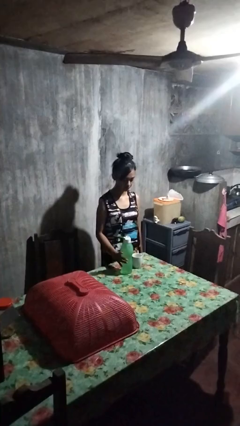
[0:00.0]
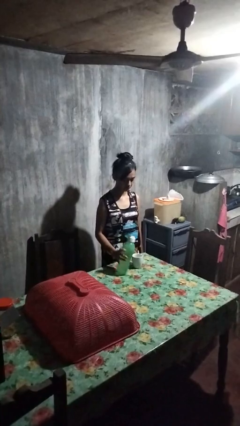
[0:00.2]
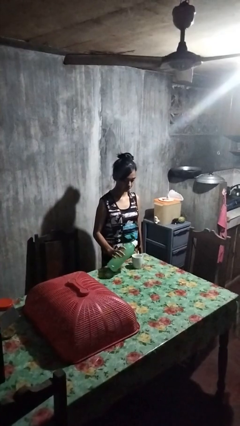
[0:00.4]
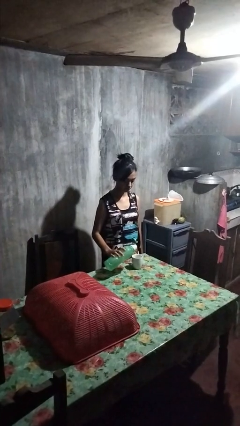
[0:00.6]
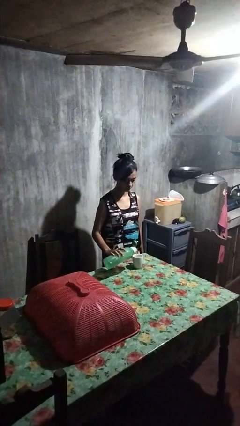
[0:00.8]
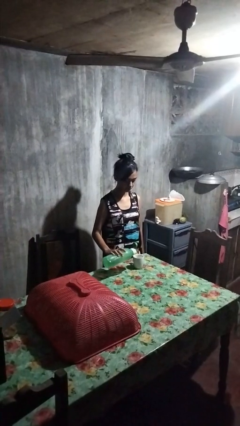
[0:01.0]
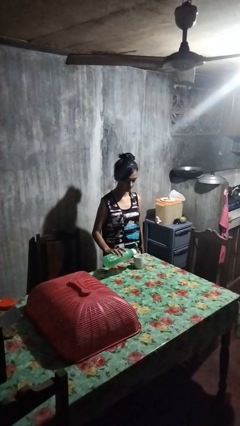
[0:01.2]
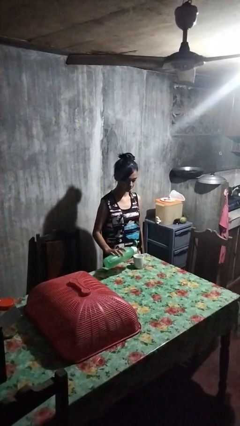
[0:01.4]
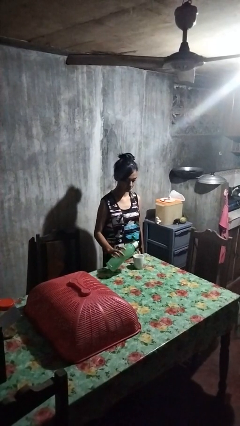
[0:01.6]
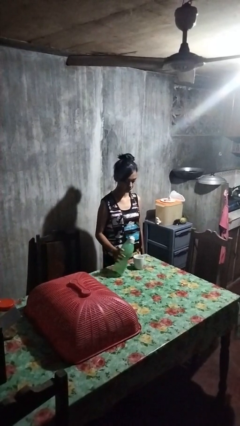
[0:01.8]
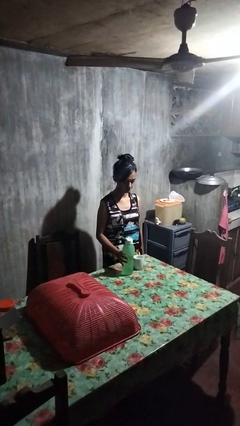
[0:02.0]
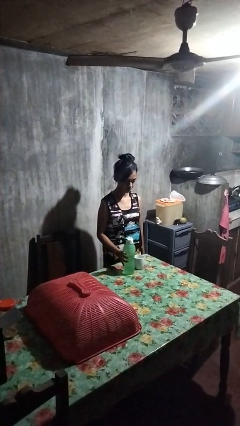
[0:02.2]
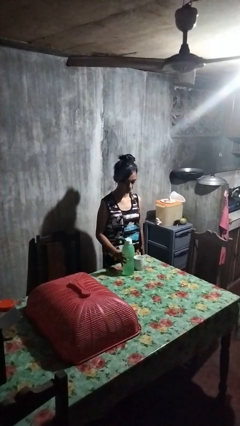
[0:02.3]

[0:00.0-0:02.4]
person pours liquid into cup

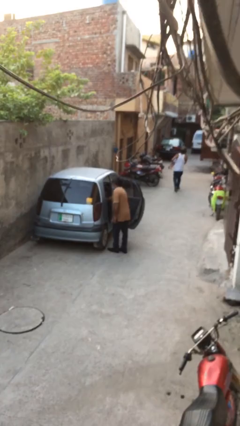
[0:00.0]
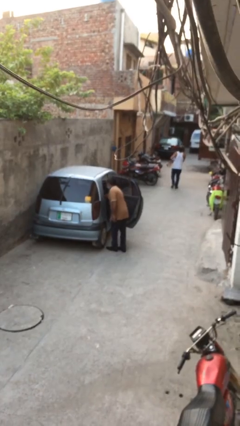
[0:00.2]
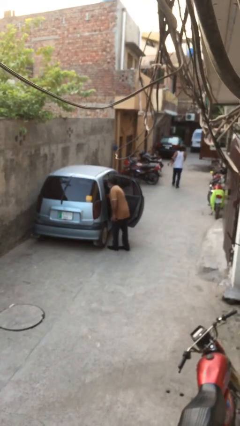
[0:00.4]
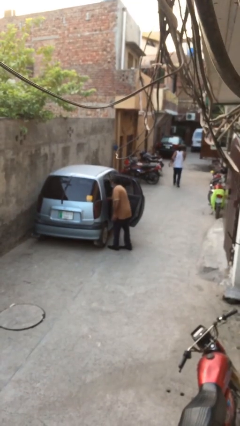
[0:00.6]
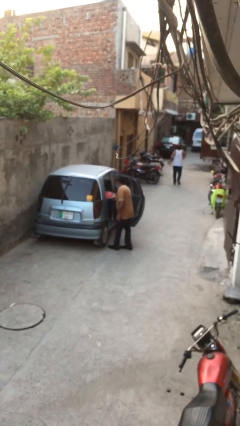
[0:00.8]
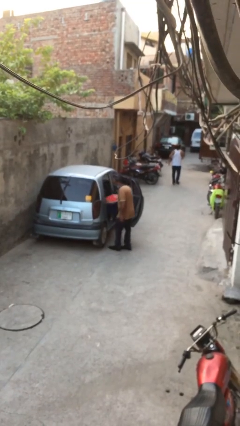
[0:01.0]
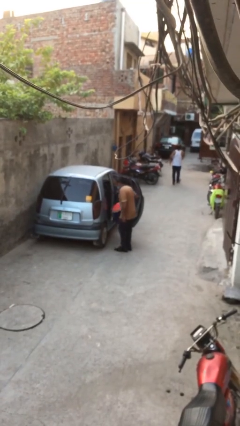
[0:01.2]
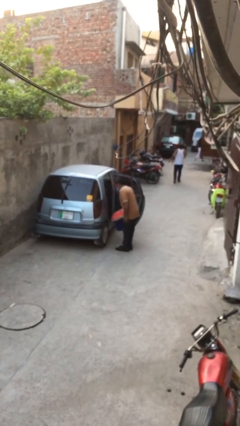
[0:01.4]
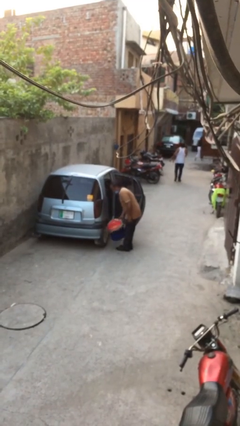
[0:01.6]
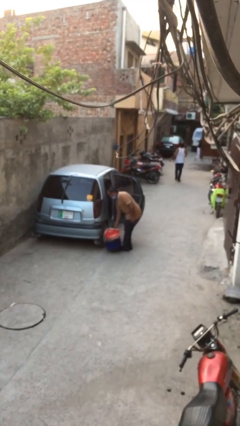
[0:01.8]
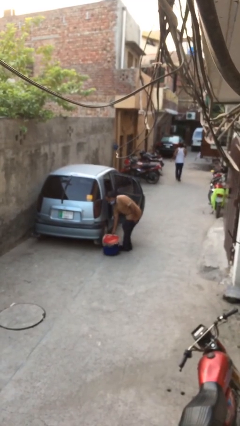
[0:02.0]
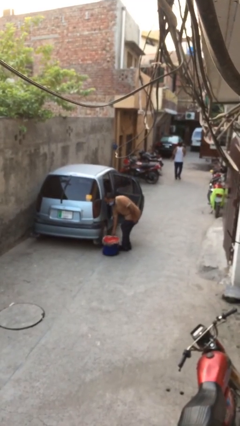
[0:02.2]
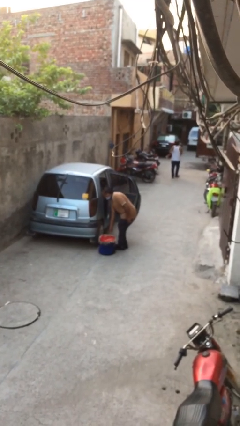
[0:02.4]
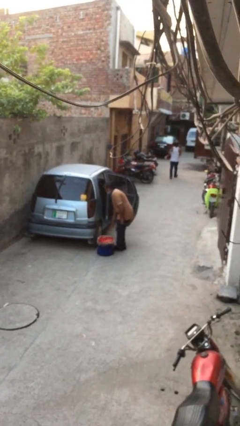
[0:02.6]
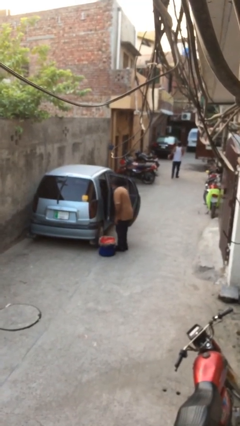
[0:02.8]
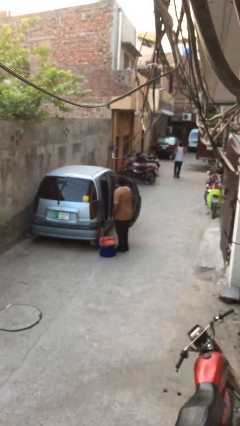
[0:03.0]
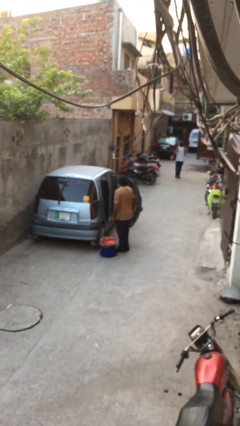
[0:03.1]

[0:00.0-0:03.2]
person unloads car

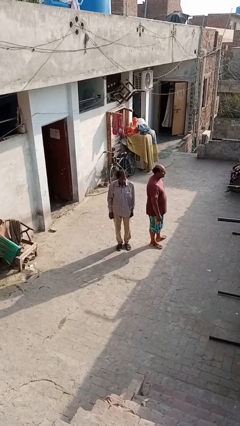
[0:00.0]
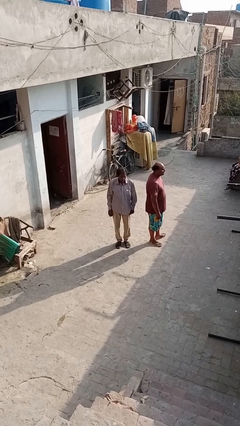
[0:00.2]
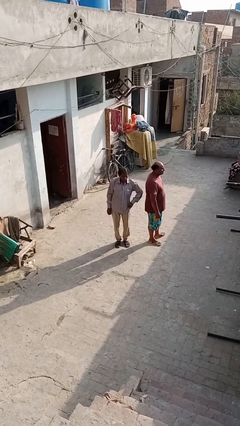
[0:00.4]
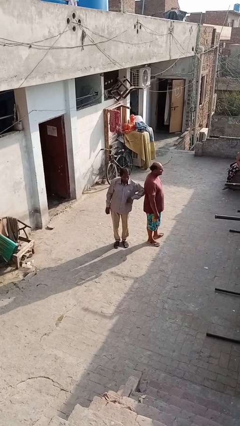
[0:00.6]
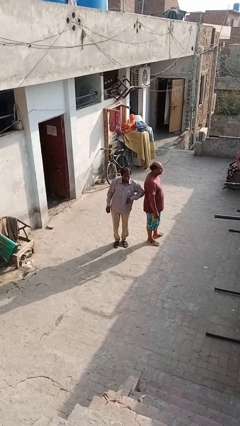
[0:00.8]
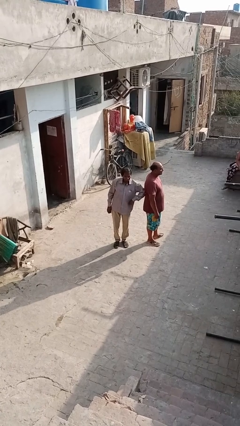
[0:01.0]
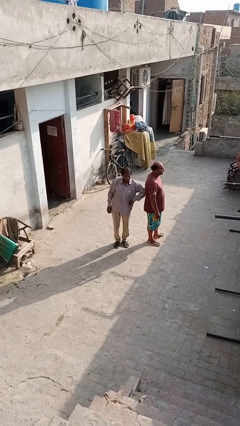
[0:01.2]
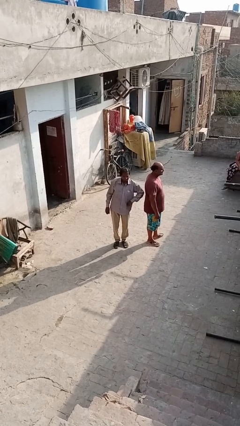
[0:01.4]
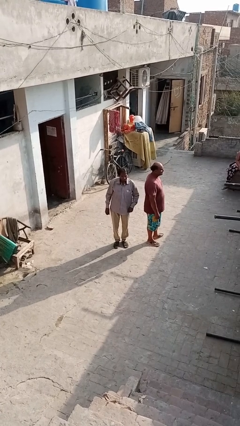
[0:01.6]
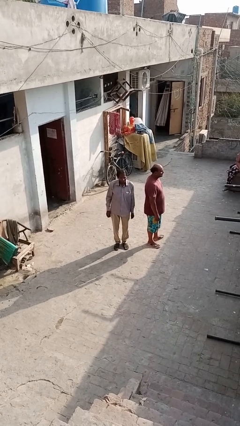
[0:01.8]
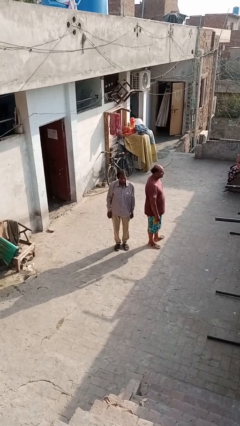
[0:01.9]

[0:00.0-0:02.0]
person nudges person with elbow

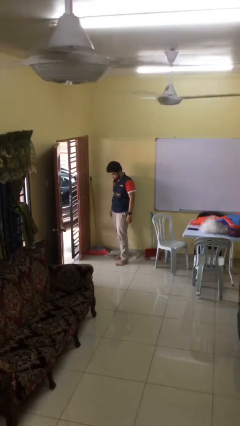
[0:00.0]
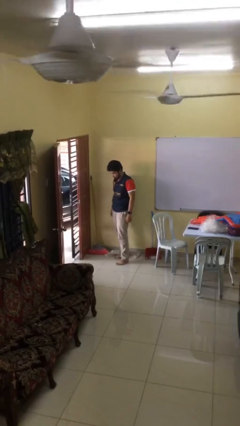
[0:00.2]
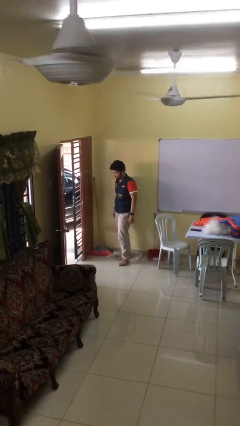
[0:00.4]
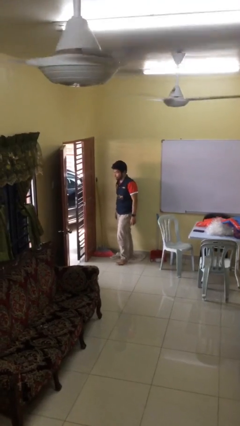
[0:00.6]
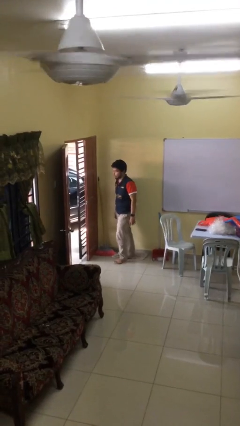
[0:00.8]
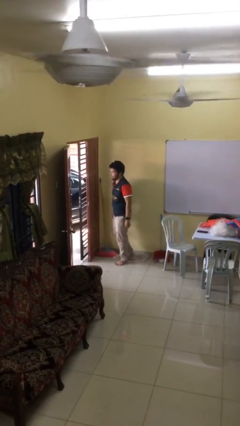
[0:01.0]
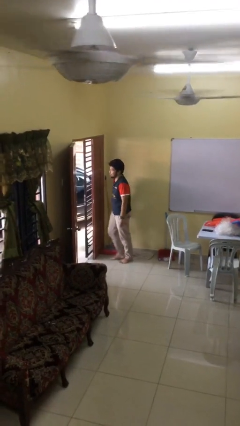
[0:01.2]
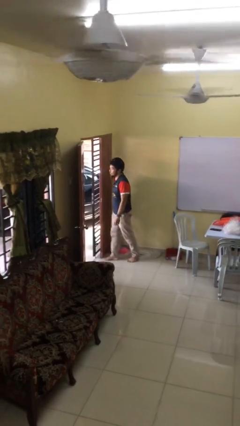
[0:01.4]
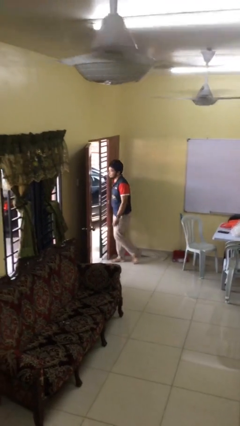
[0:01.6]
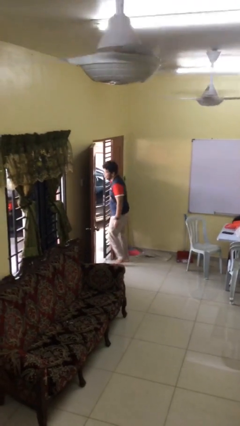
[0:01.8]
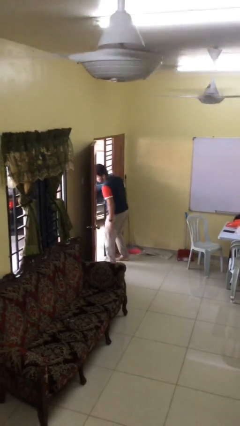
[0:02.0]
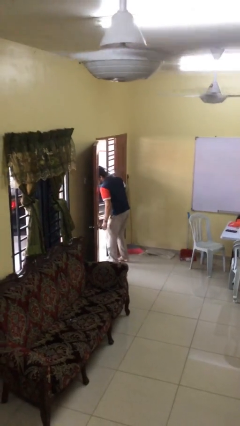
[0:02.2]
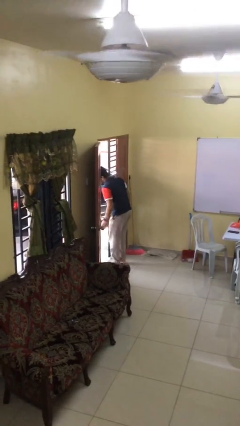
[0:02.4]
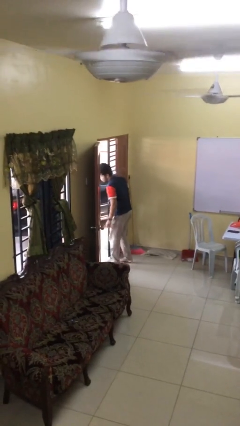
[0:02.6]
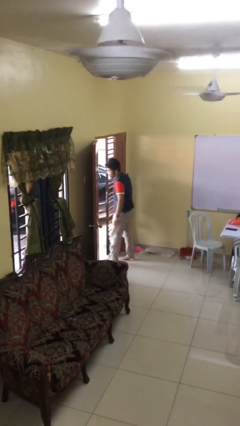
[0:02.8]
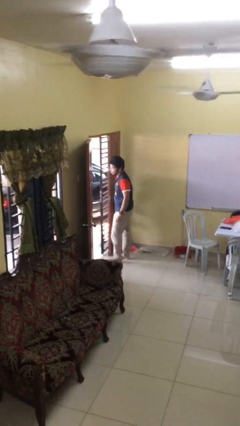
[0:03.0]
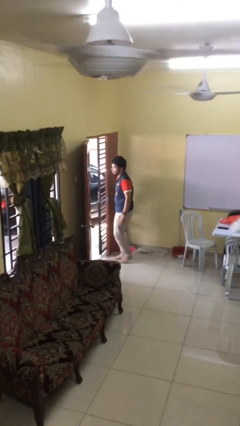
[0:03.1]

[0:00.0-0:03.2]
person bumps into wall

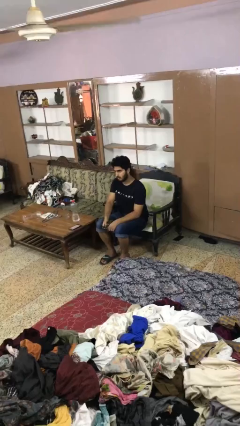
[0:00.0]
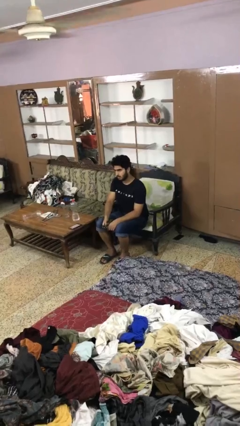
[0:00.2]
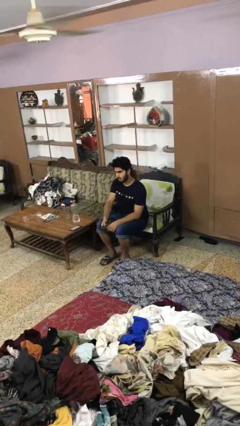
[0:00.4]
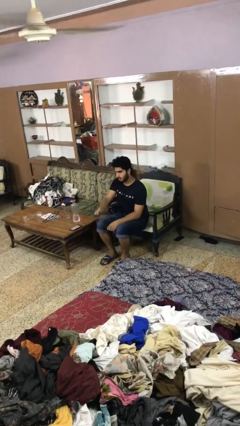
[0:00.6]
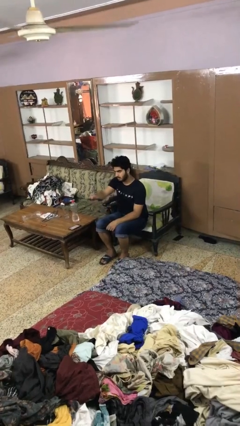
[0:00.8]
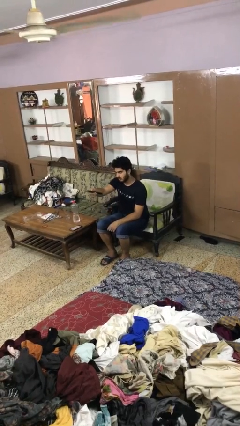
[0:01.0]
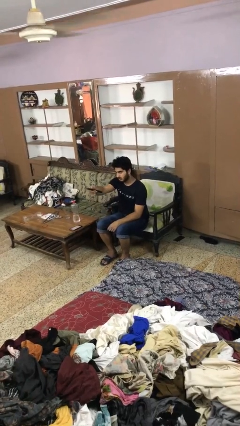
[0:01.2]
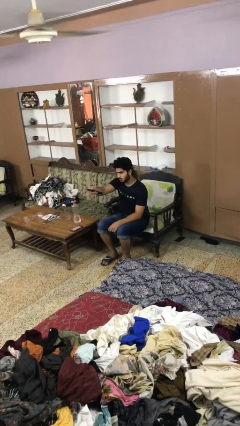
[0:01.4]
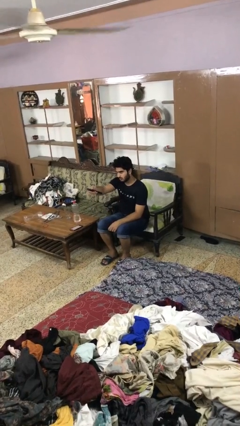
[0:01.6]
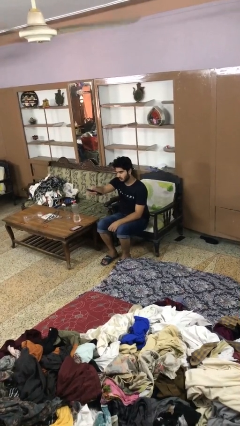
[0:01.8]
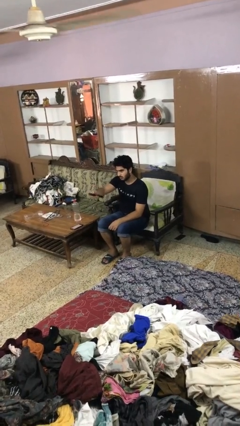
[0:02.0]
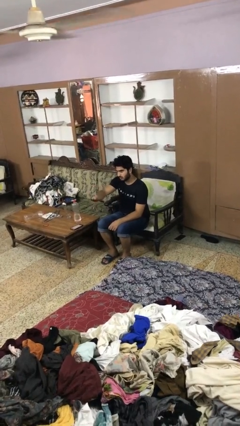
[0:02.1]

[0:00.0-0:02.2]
person uses television remote

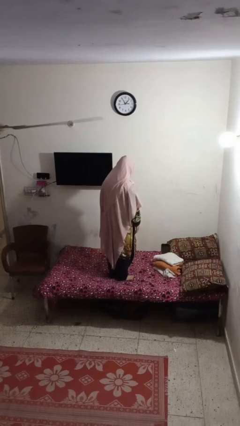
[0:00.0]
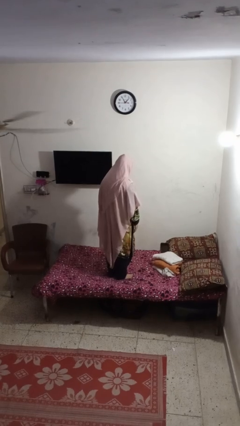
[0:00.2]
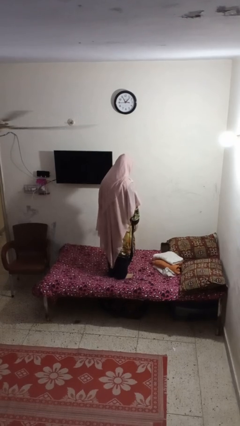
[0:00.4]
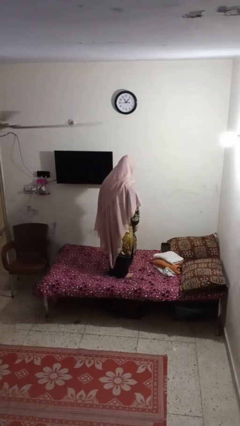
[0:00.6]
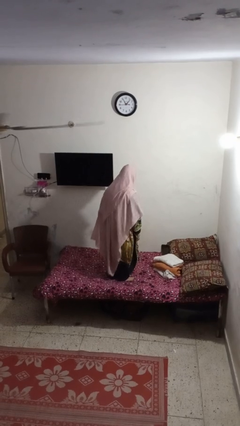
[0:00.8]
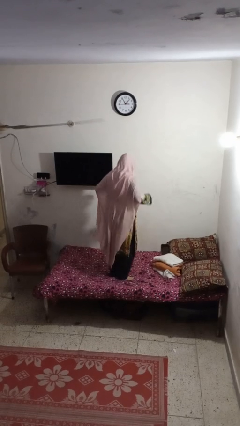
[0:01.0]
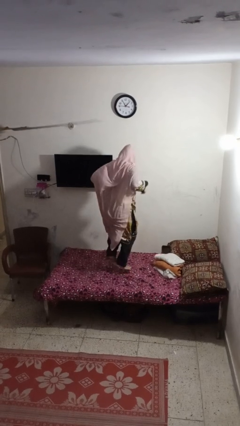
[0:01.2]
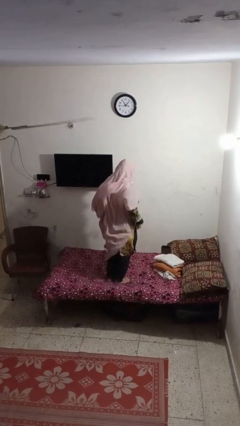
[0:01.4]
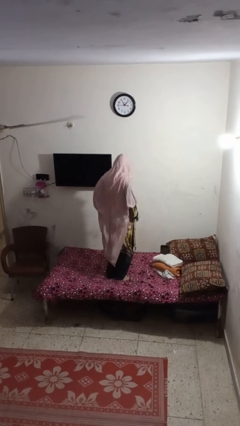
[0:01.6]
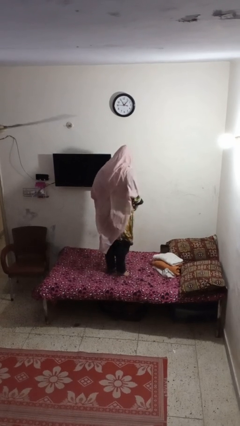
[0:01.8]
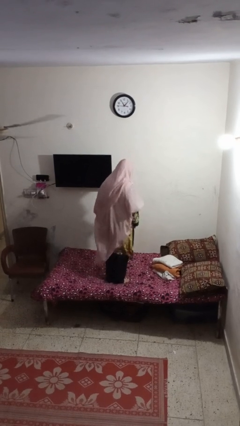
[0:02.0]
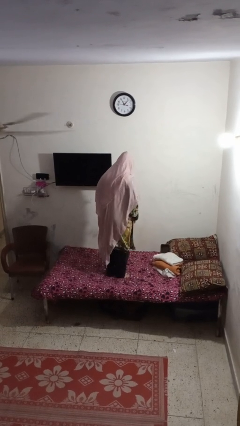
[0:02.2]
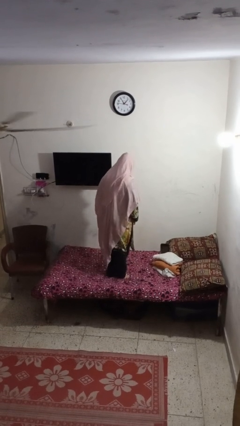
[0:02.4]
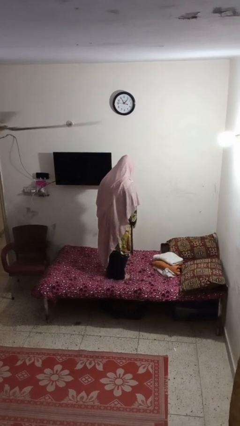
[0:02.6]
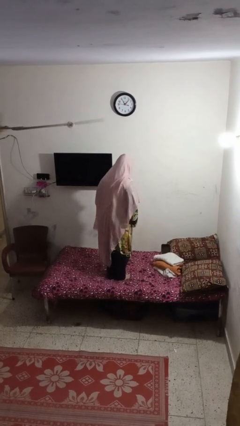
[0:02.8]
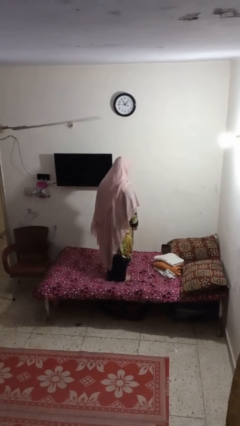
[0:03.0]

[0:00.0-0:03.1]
person jumps on bed

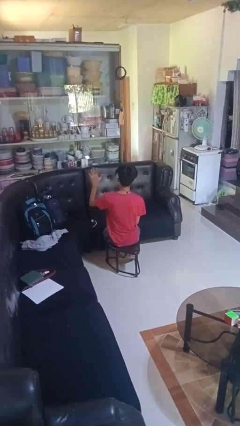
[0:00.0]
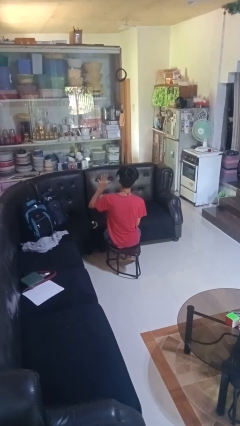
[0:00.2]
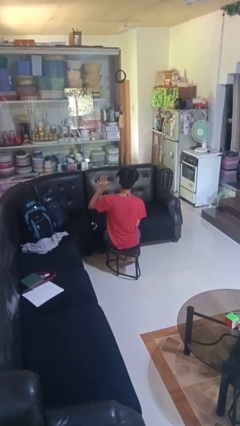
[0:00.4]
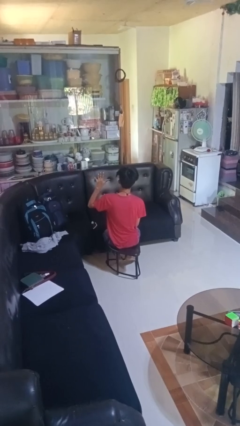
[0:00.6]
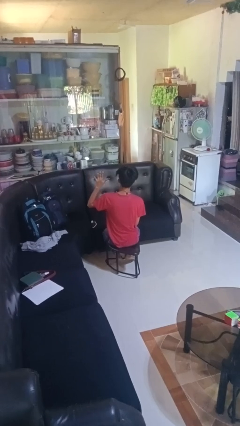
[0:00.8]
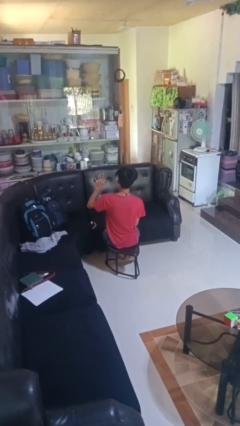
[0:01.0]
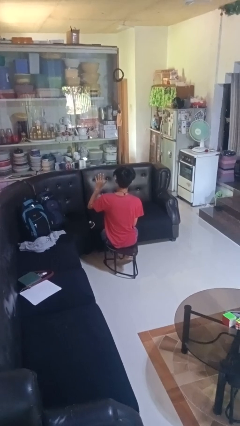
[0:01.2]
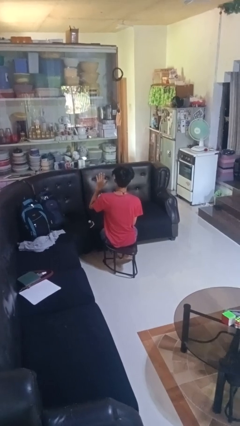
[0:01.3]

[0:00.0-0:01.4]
person gestures number five
